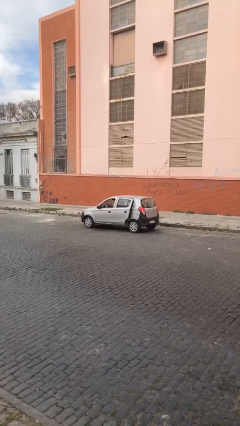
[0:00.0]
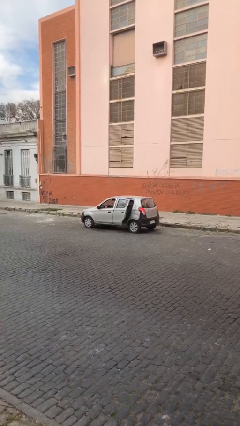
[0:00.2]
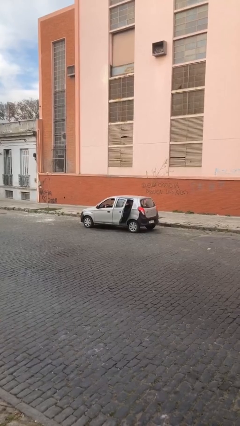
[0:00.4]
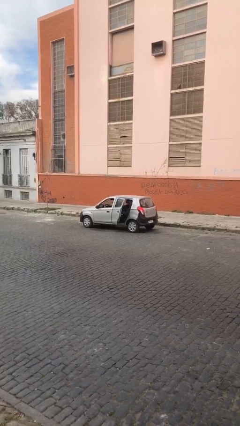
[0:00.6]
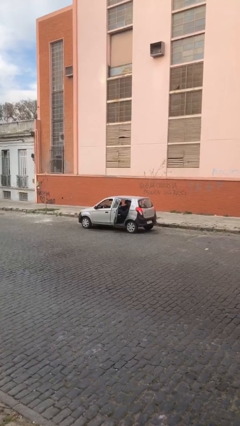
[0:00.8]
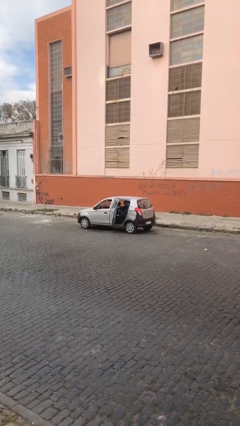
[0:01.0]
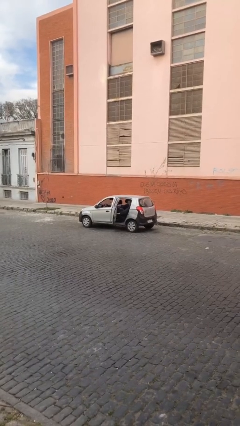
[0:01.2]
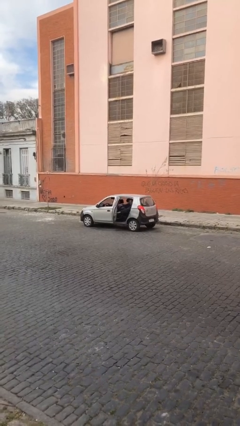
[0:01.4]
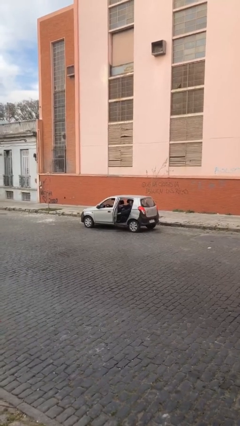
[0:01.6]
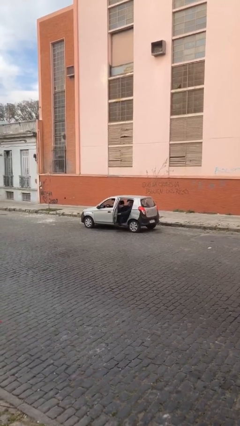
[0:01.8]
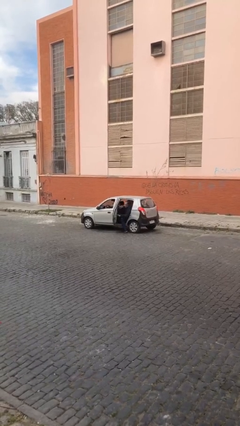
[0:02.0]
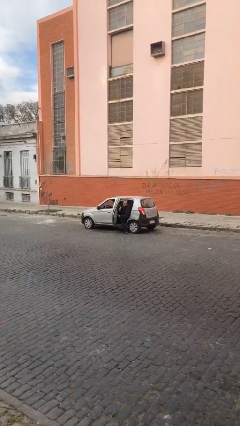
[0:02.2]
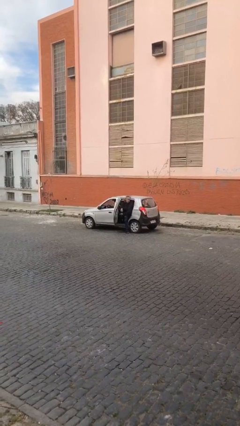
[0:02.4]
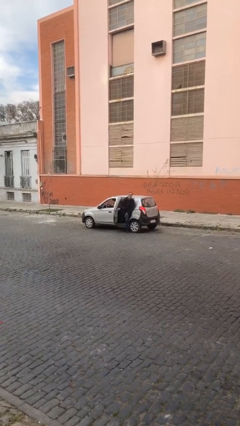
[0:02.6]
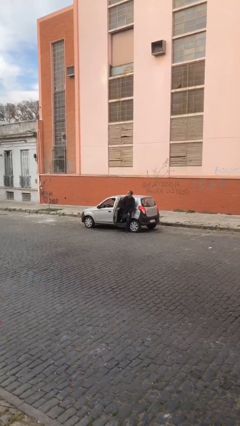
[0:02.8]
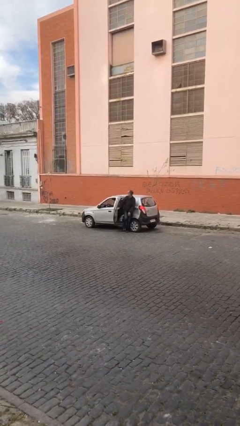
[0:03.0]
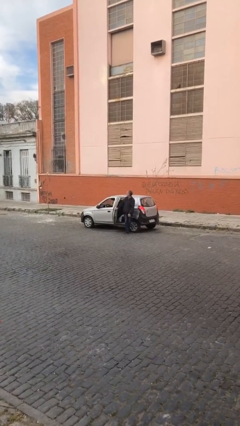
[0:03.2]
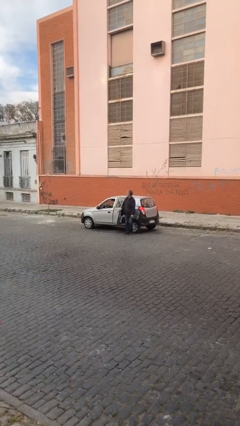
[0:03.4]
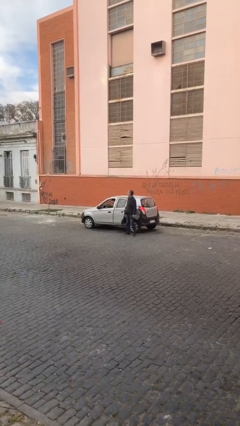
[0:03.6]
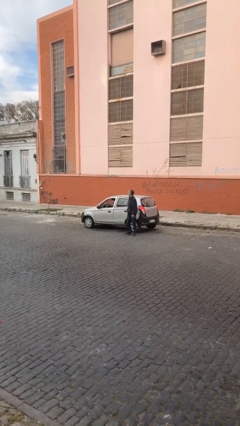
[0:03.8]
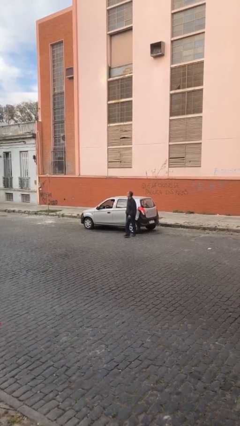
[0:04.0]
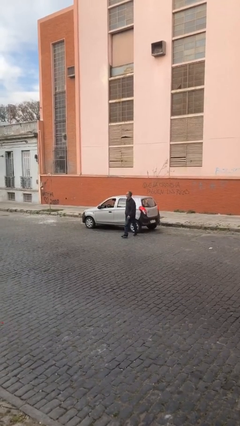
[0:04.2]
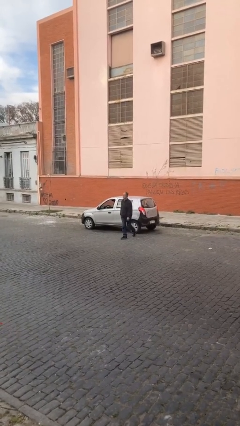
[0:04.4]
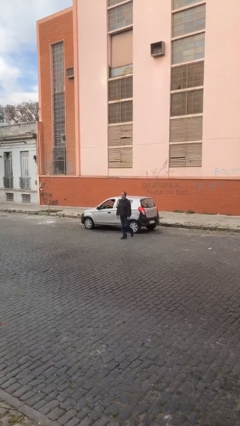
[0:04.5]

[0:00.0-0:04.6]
car drops off person

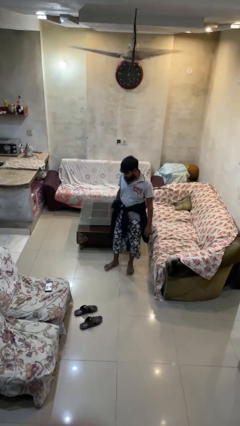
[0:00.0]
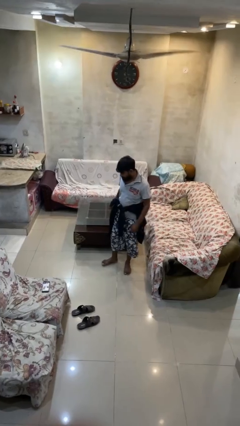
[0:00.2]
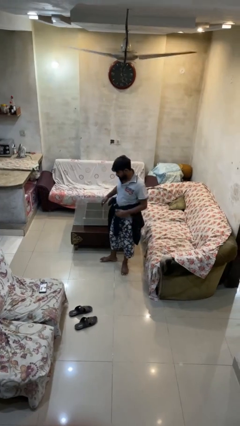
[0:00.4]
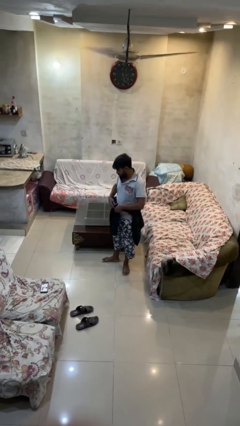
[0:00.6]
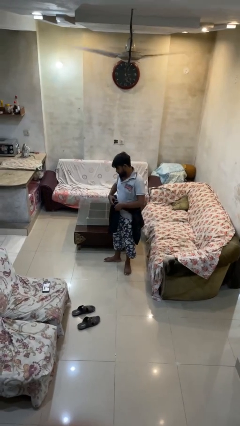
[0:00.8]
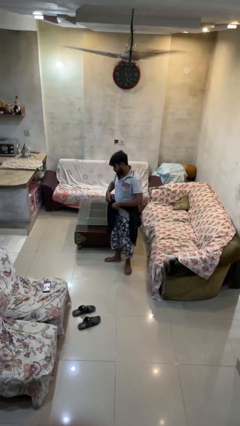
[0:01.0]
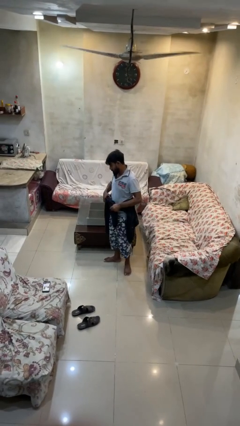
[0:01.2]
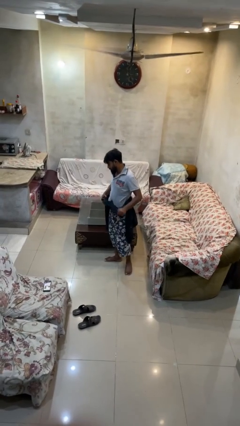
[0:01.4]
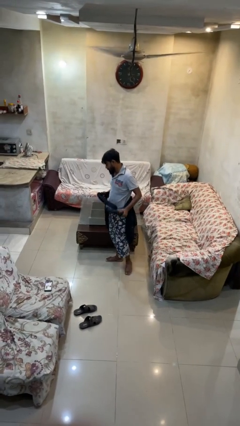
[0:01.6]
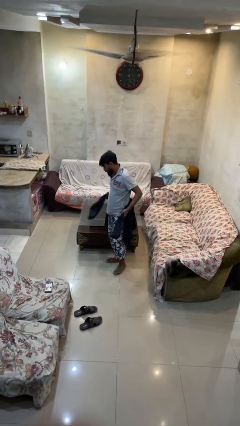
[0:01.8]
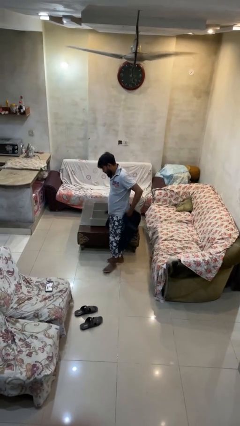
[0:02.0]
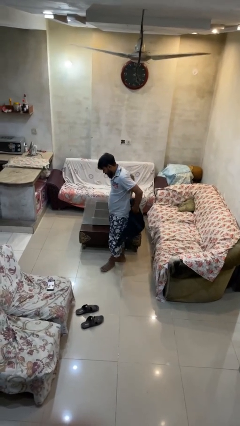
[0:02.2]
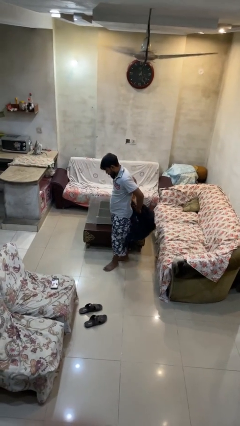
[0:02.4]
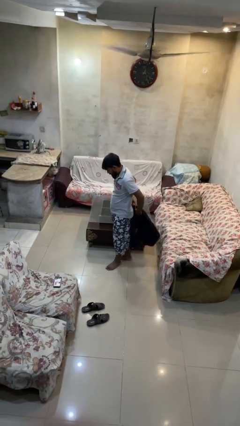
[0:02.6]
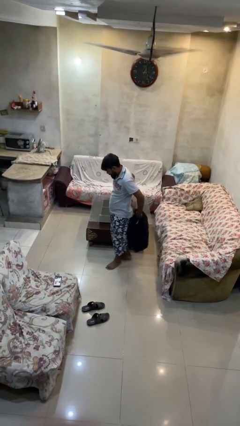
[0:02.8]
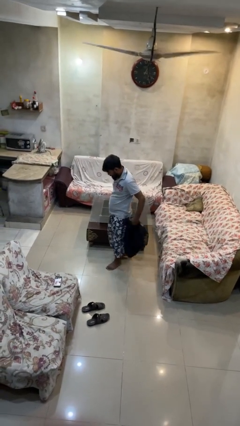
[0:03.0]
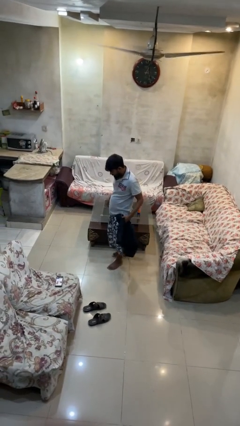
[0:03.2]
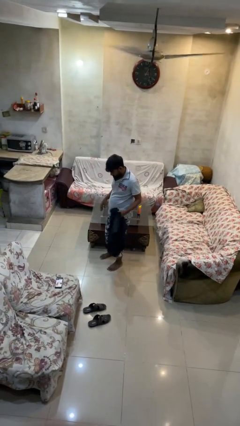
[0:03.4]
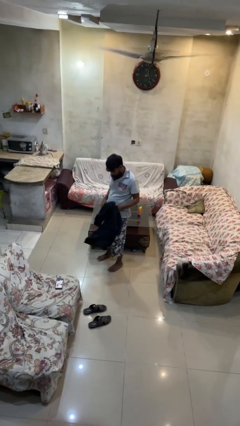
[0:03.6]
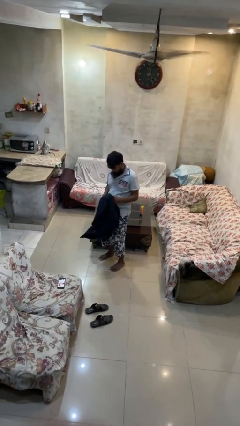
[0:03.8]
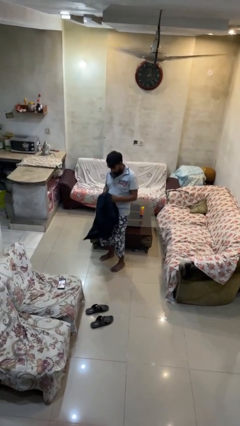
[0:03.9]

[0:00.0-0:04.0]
person unties jacket around waist

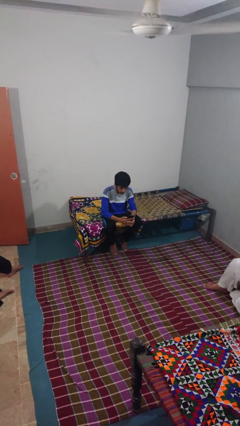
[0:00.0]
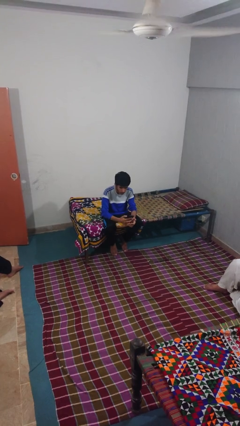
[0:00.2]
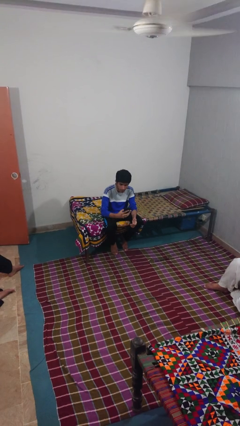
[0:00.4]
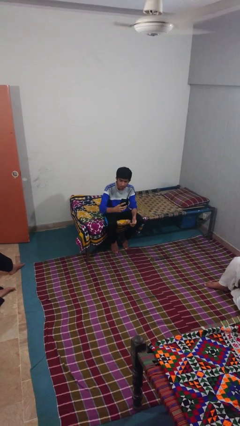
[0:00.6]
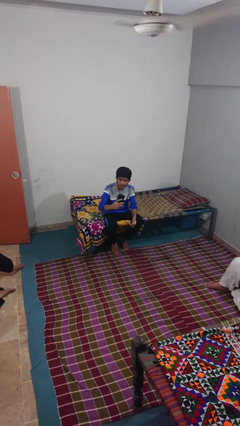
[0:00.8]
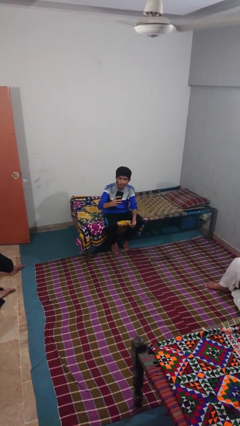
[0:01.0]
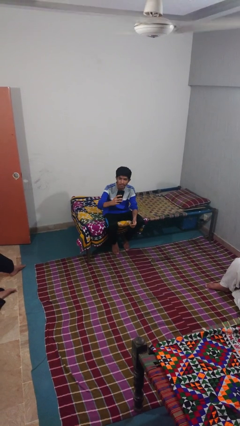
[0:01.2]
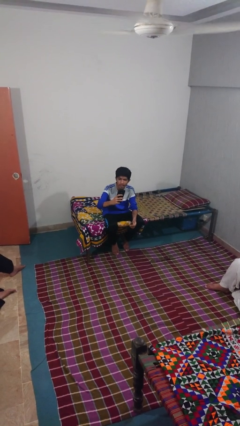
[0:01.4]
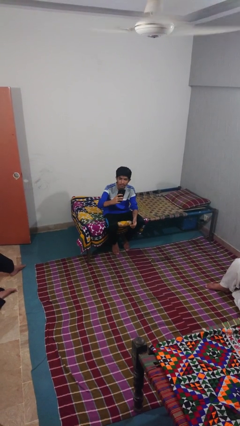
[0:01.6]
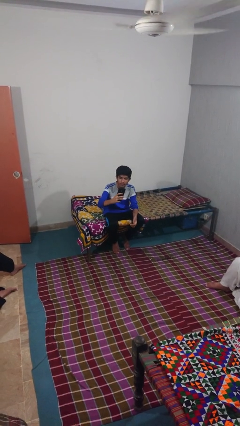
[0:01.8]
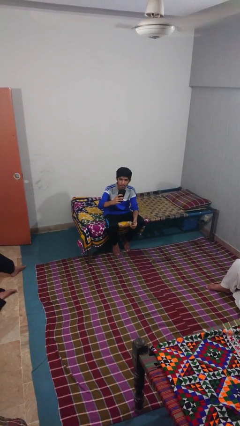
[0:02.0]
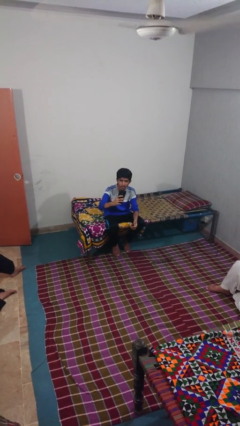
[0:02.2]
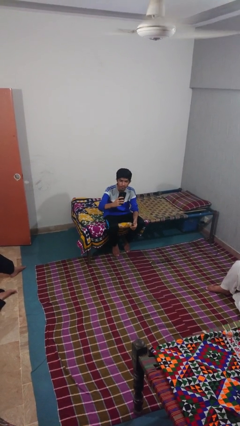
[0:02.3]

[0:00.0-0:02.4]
person takes selfie

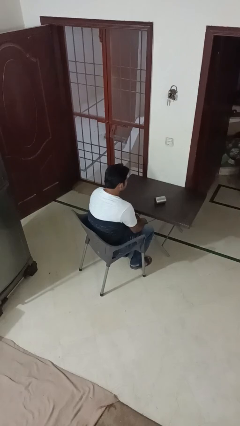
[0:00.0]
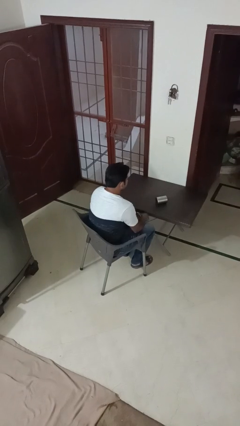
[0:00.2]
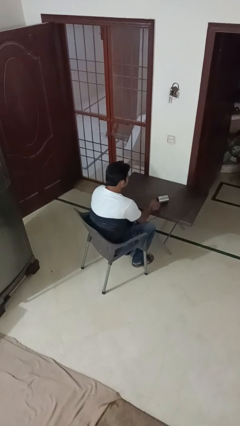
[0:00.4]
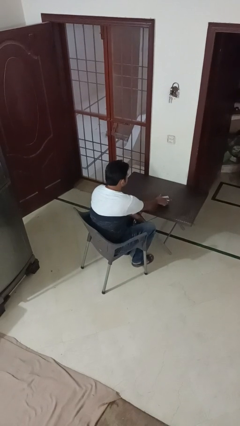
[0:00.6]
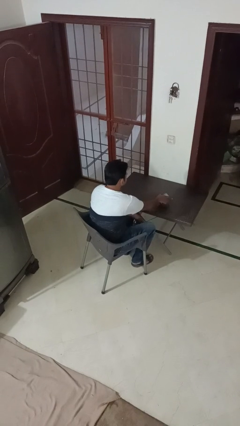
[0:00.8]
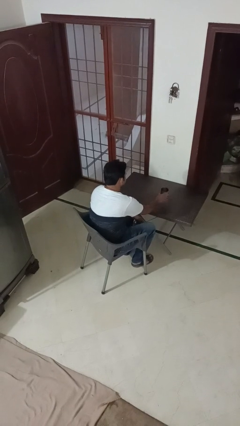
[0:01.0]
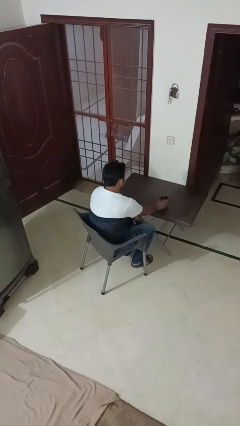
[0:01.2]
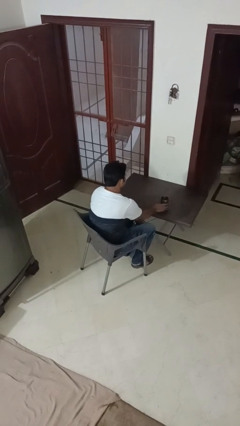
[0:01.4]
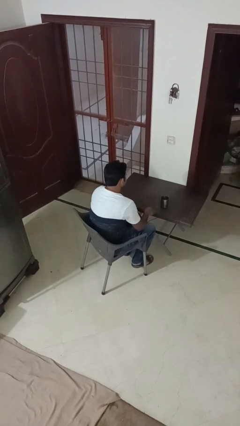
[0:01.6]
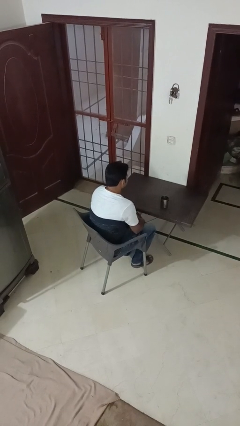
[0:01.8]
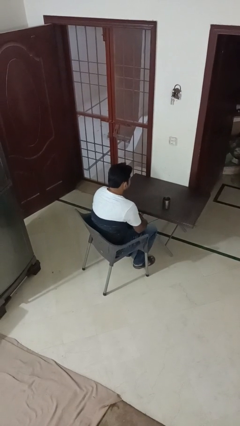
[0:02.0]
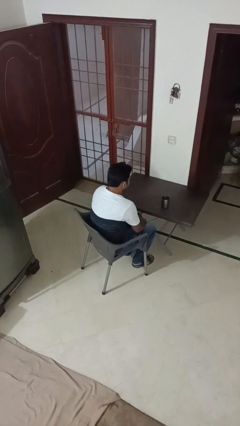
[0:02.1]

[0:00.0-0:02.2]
person sets upright glass

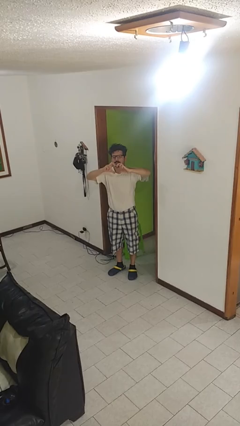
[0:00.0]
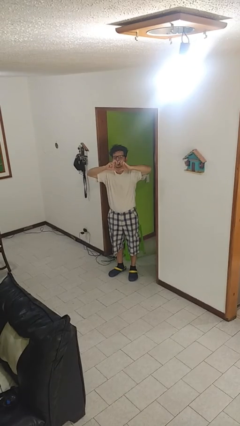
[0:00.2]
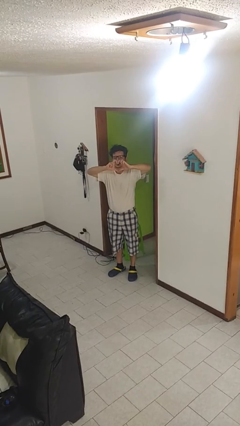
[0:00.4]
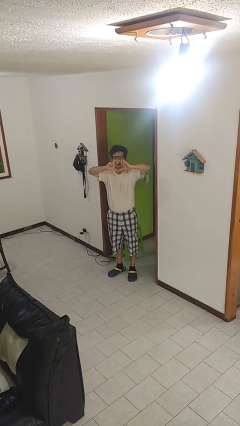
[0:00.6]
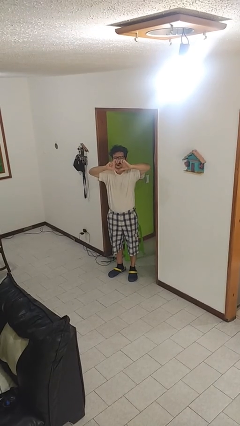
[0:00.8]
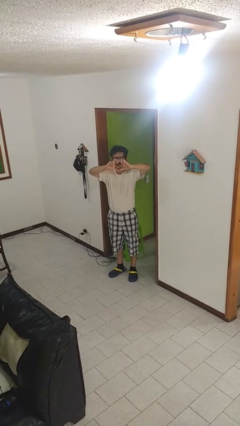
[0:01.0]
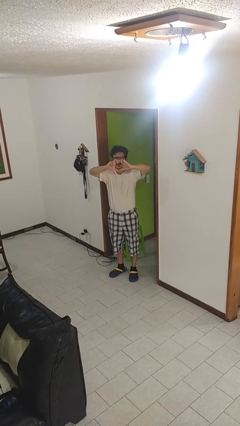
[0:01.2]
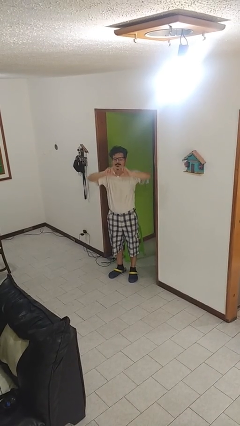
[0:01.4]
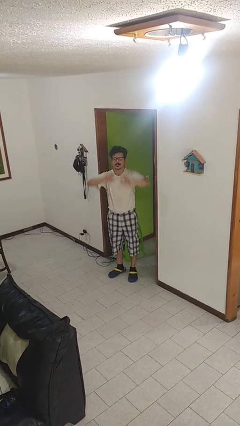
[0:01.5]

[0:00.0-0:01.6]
person gestures heart

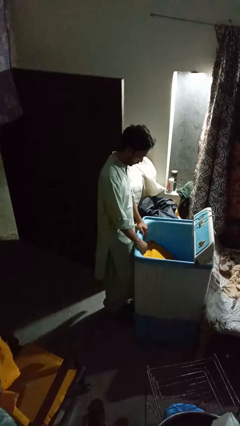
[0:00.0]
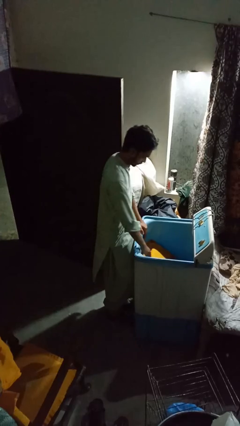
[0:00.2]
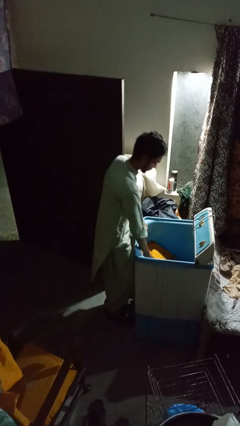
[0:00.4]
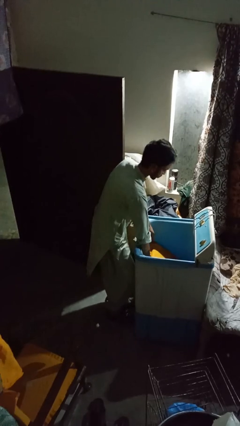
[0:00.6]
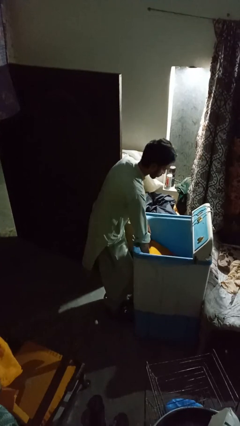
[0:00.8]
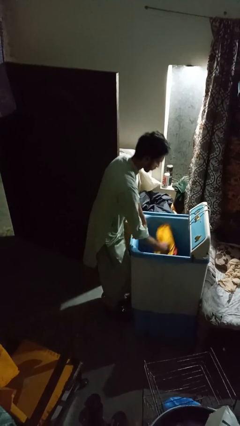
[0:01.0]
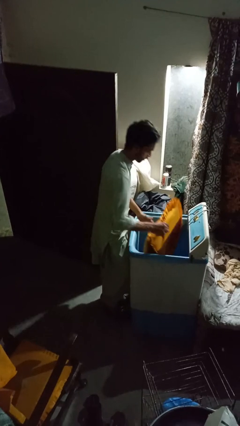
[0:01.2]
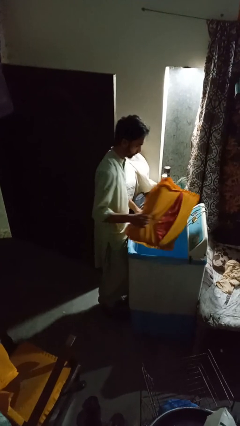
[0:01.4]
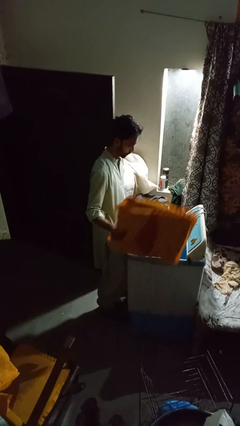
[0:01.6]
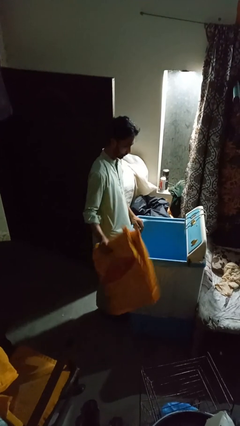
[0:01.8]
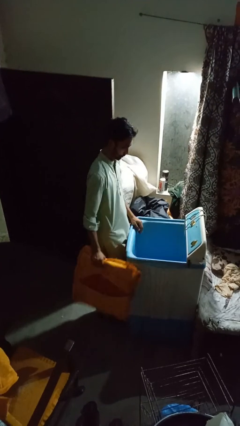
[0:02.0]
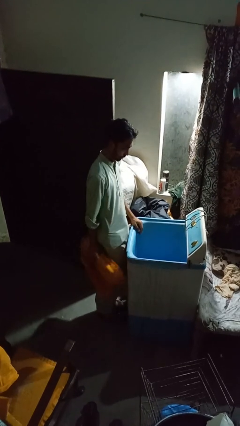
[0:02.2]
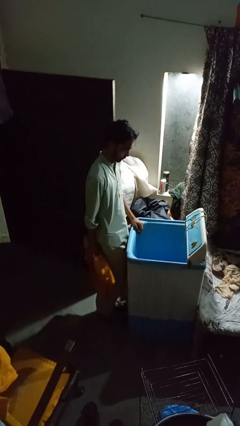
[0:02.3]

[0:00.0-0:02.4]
person unloads clotheswasher
